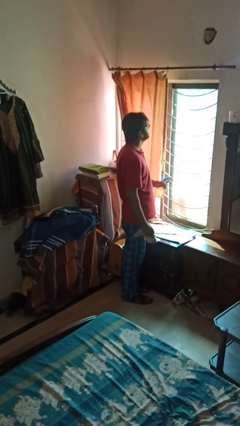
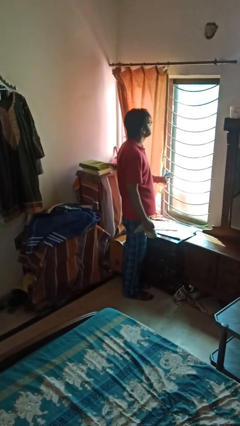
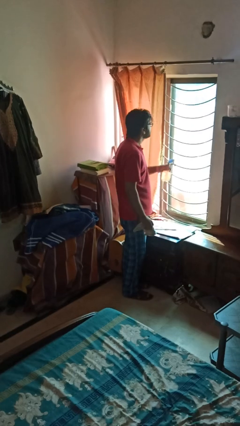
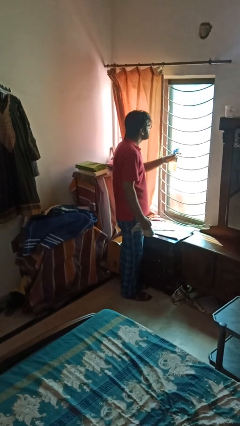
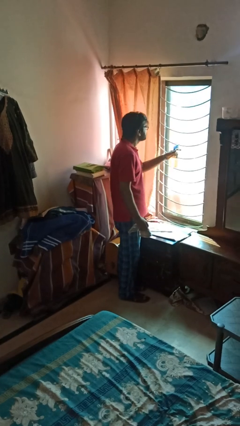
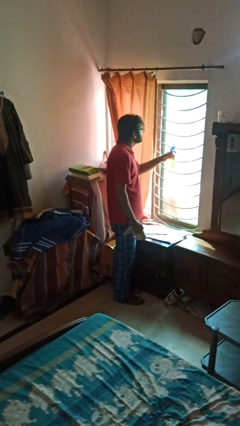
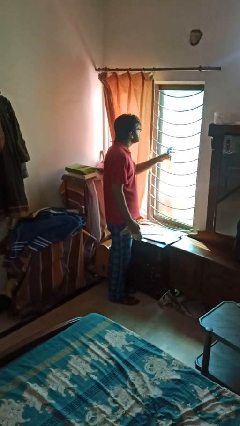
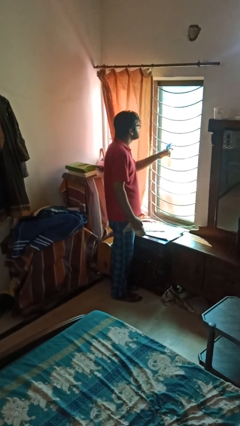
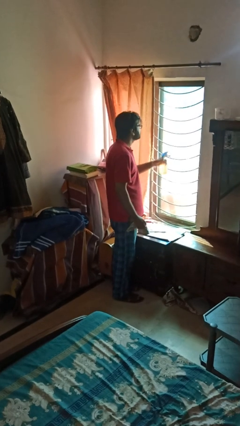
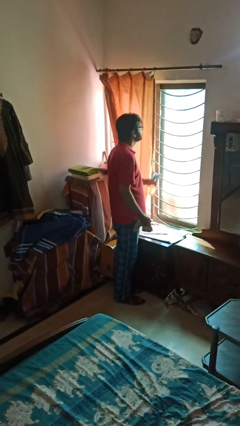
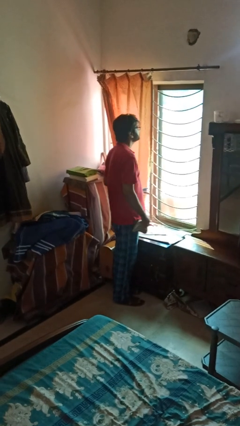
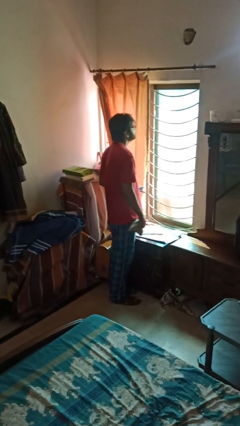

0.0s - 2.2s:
person sprays from bottle

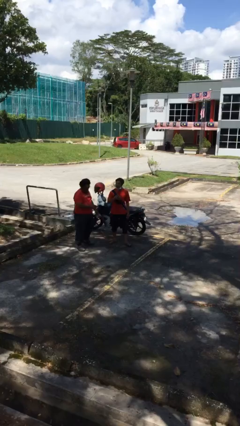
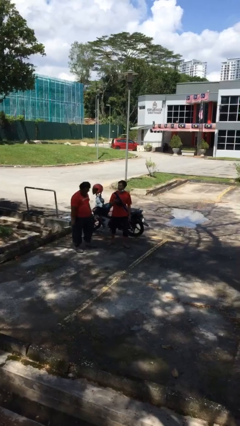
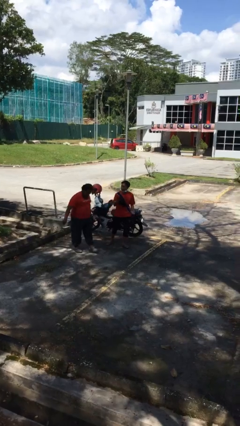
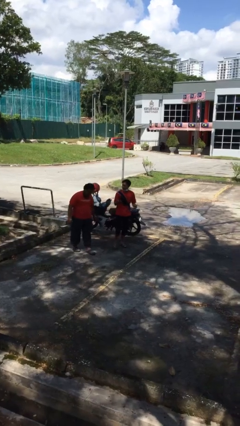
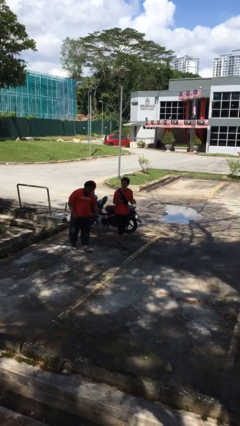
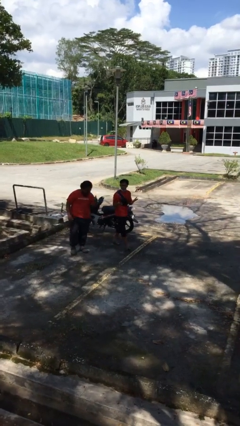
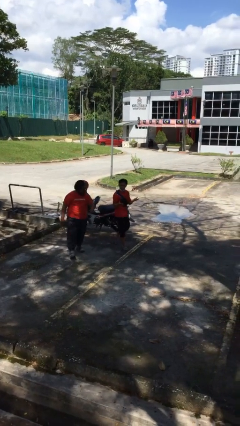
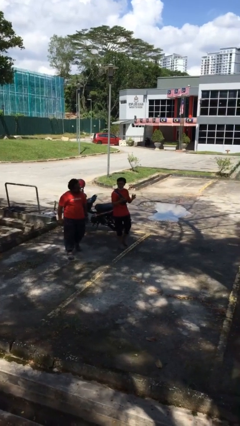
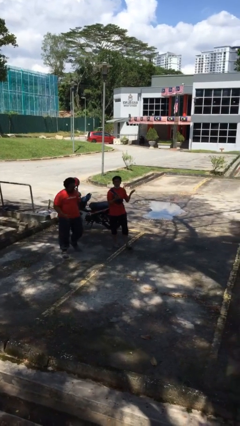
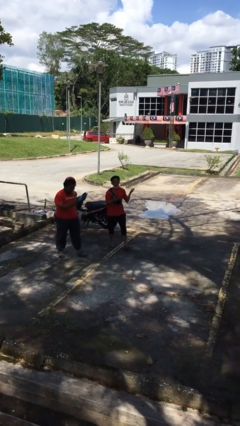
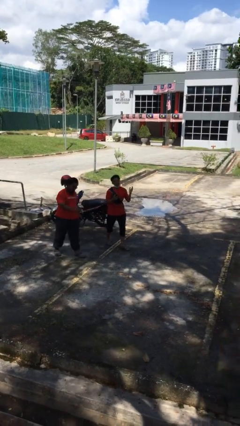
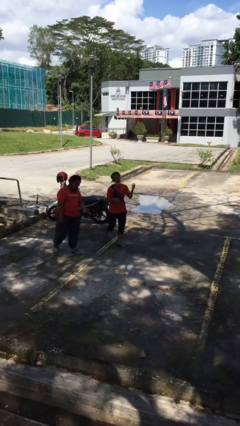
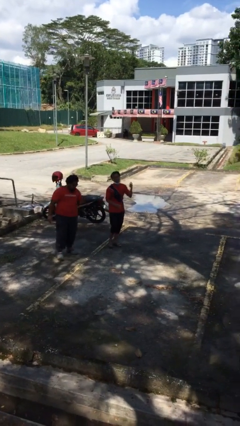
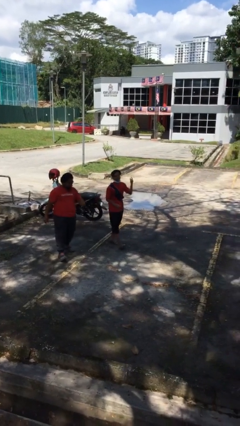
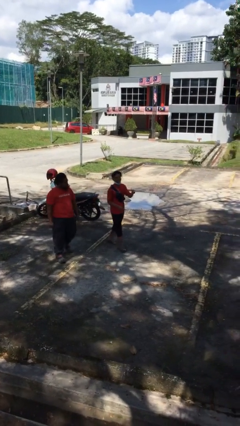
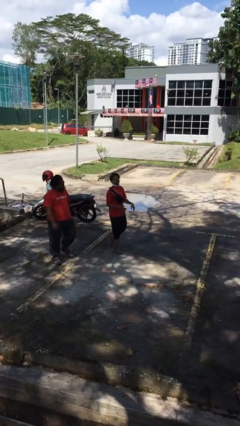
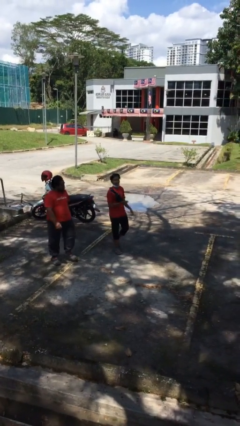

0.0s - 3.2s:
person talks to person

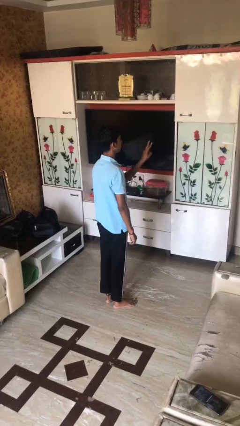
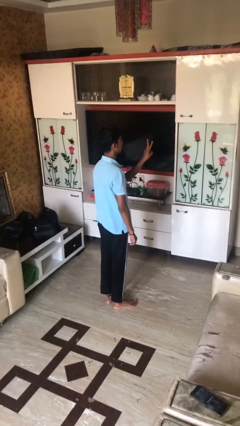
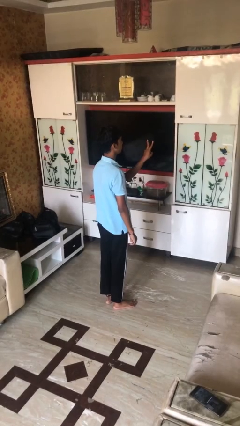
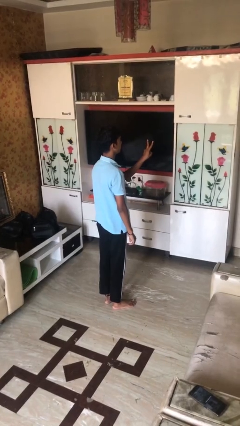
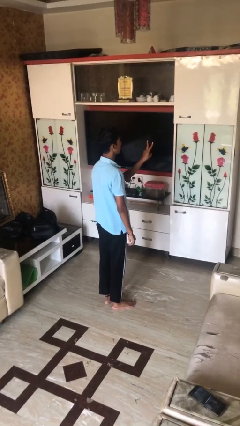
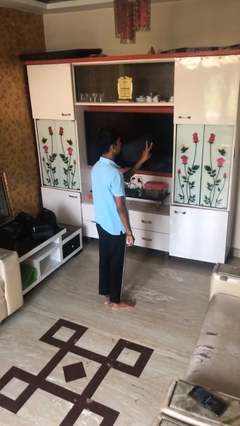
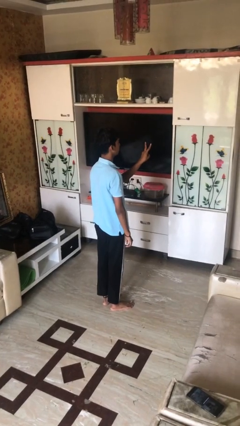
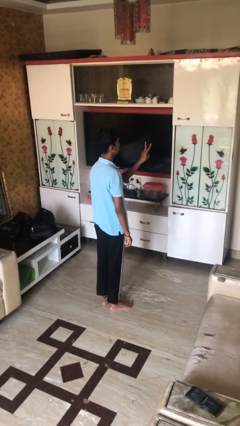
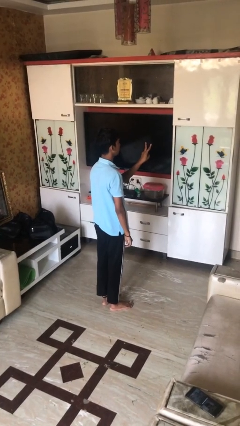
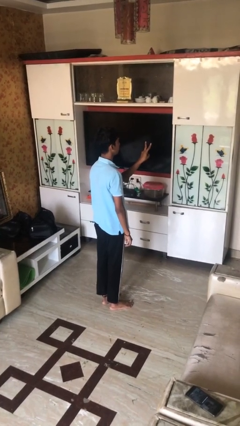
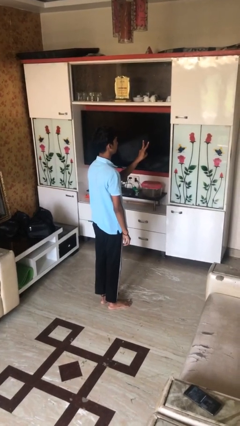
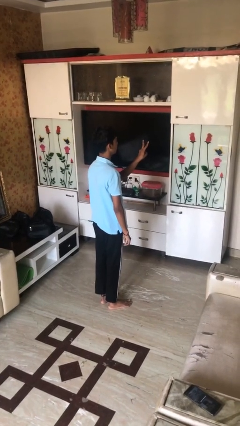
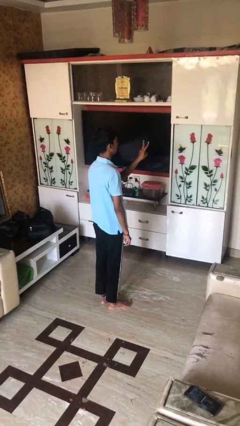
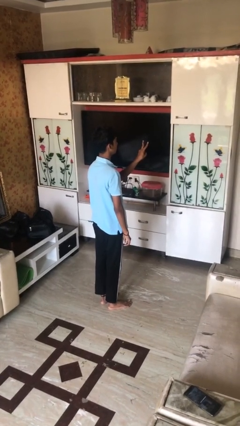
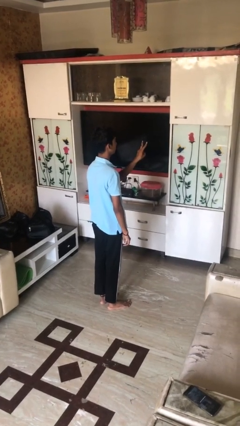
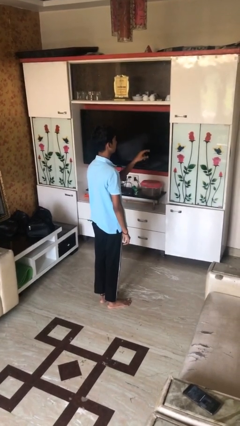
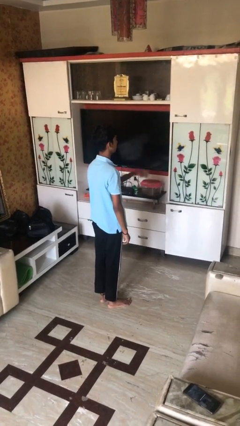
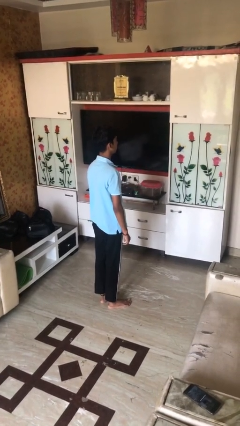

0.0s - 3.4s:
person gestures peace

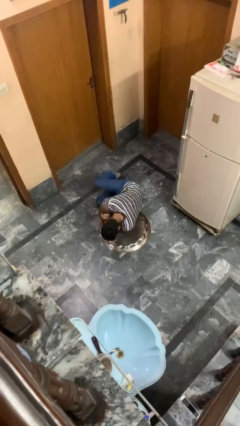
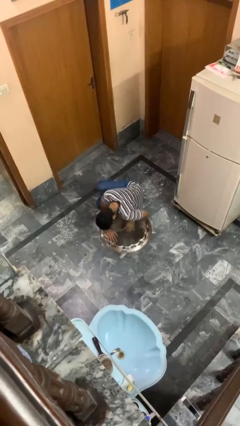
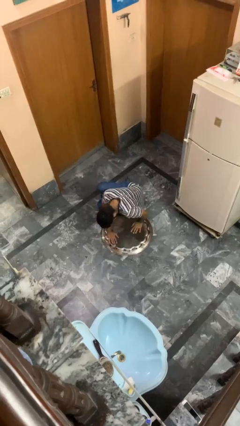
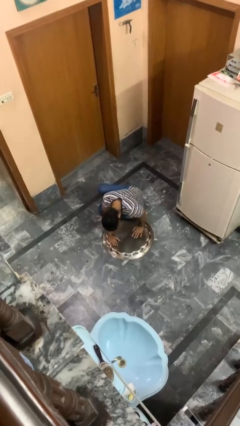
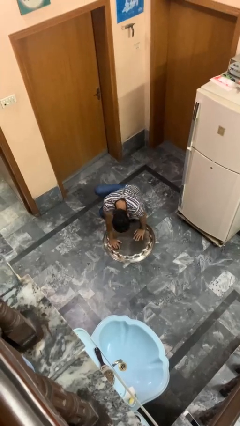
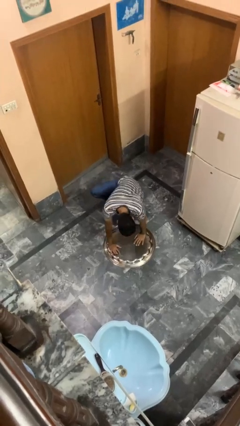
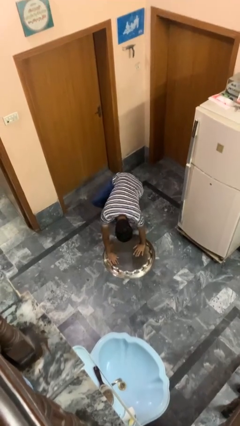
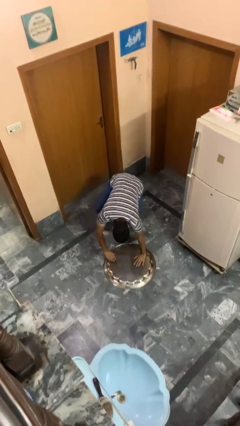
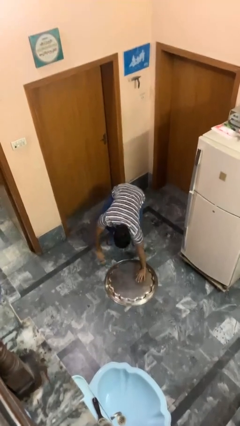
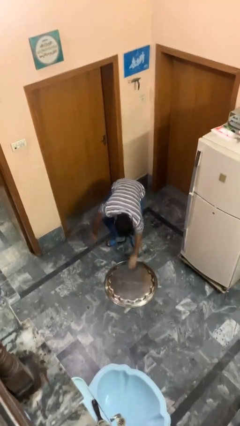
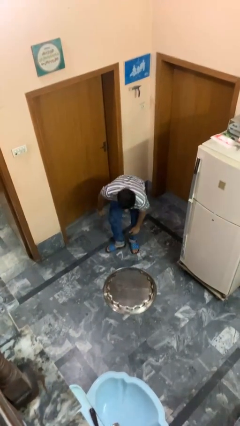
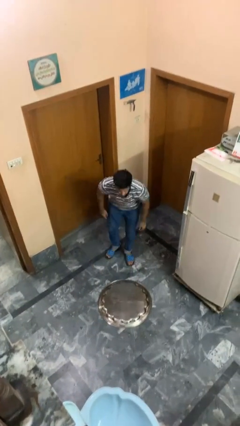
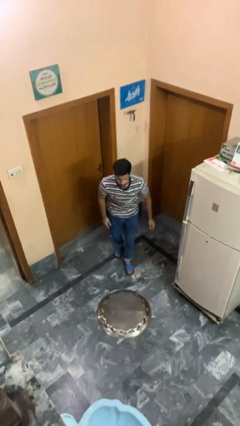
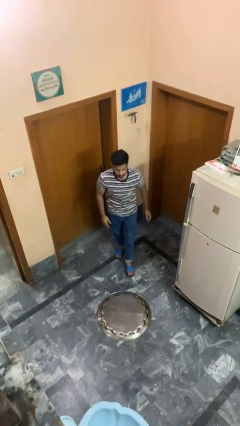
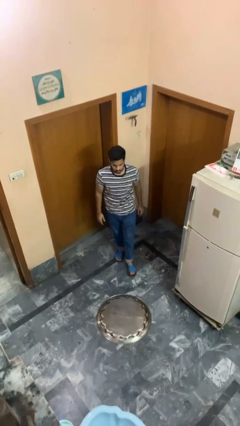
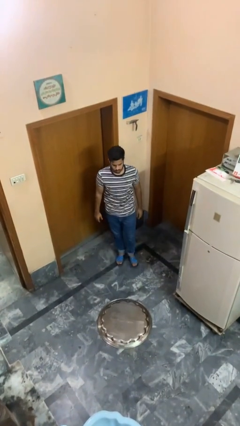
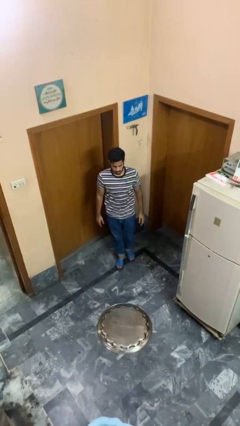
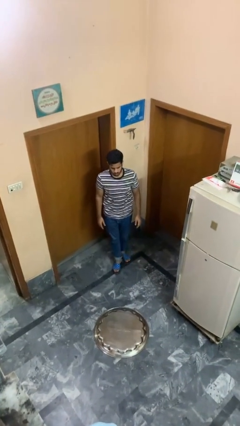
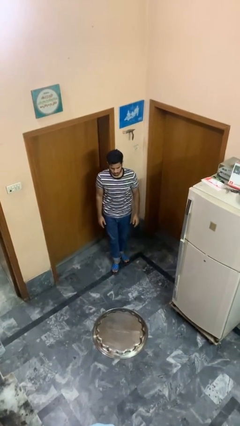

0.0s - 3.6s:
person stands up from floor

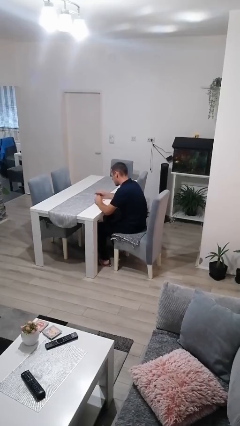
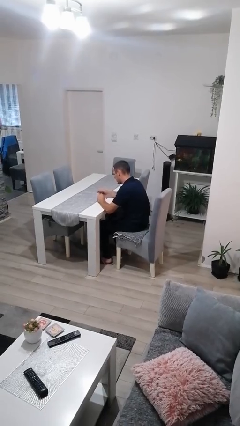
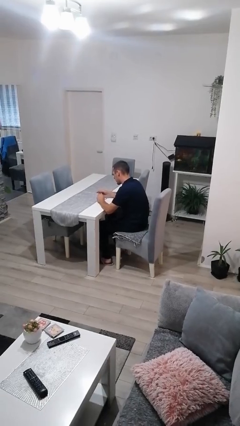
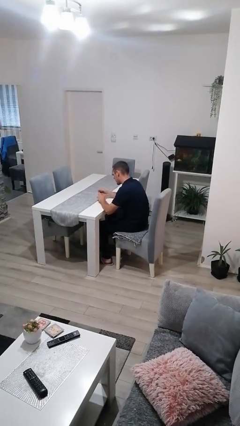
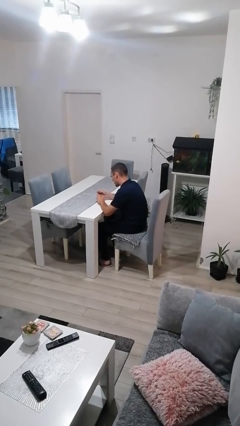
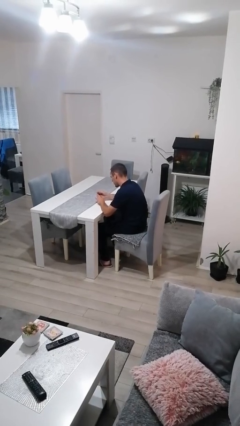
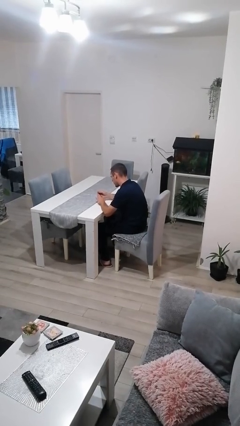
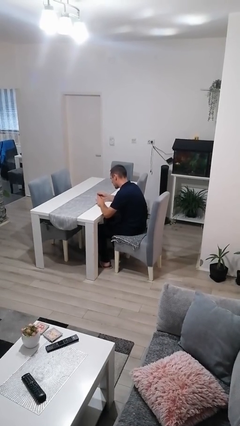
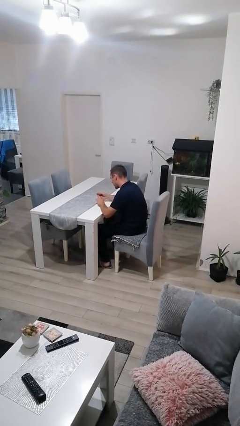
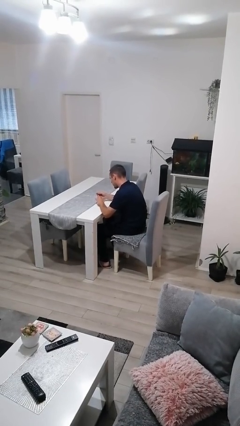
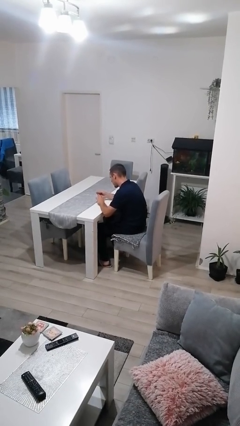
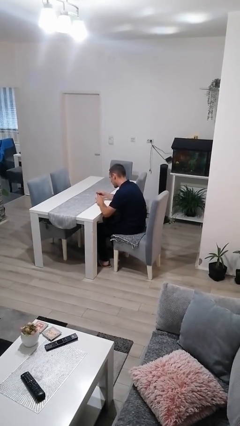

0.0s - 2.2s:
person clips fingernails

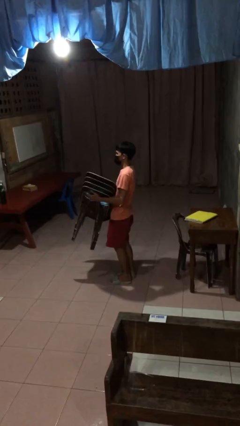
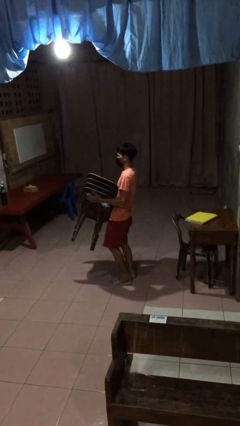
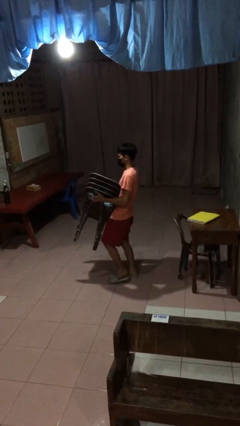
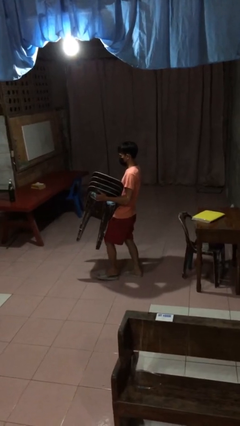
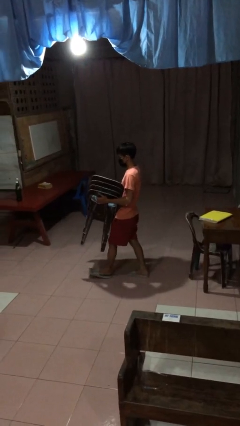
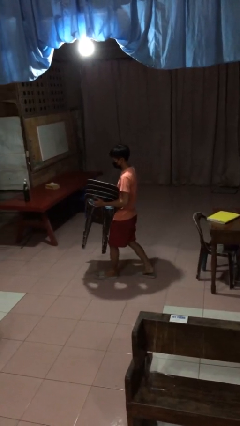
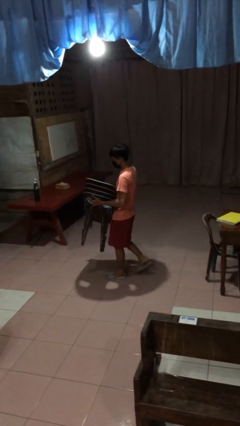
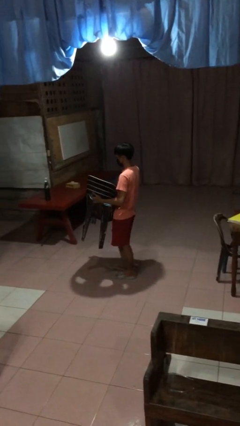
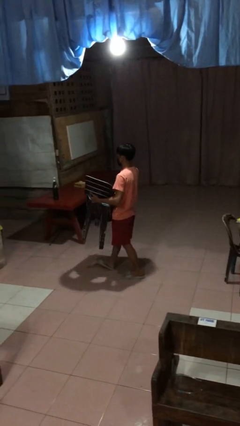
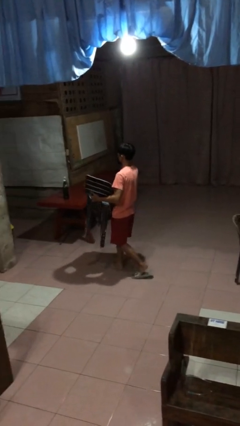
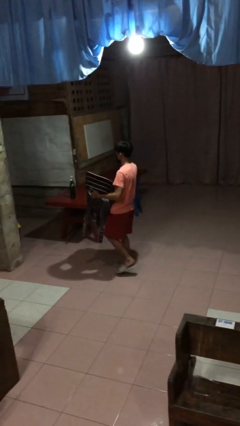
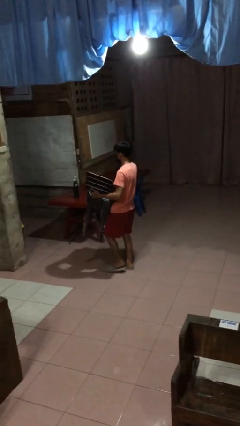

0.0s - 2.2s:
person carries heavy object

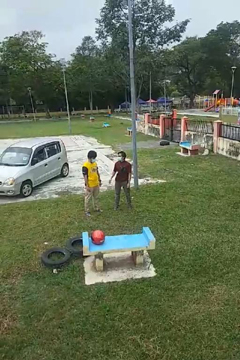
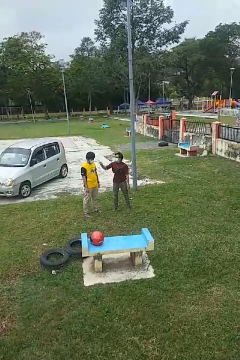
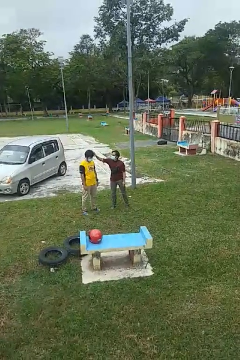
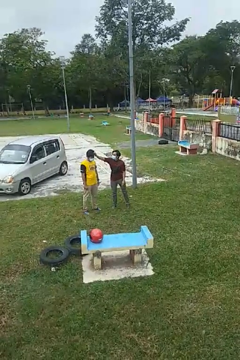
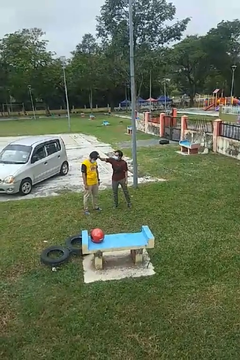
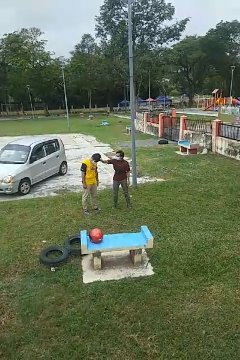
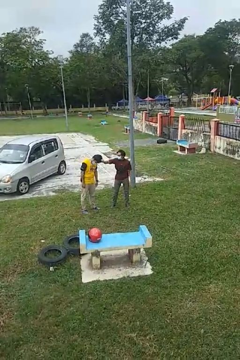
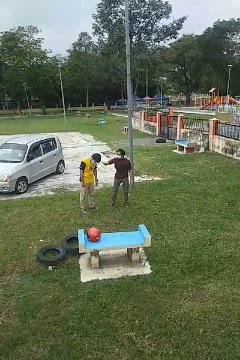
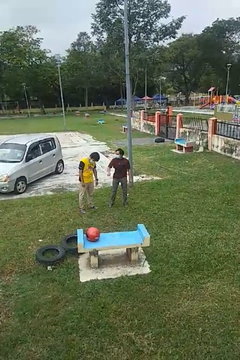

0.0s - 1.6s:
person grabs person by hair
